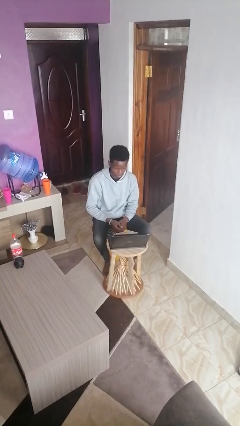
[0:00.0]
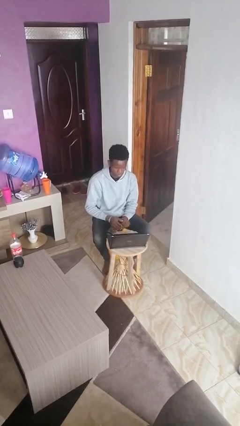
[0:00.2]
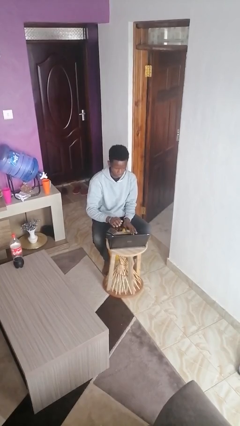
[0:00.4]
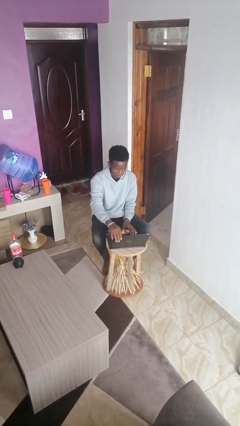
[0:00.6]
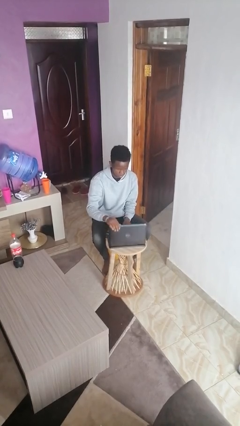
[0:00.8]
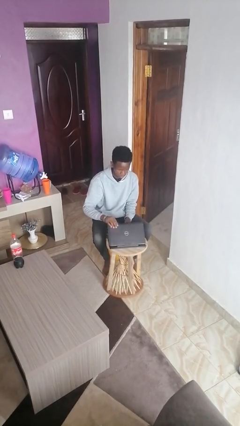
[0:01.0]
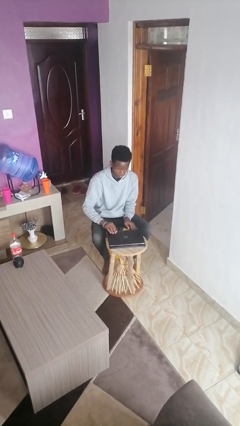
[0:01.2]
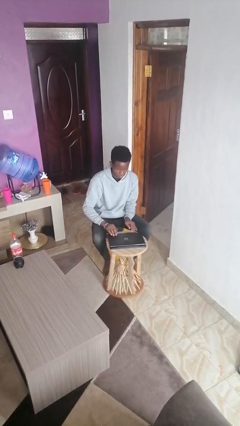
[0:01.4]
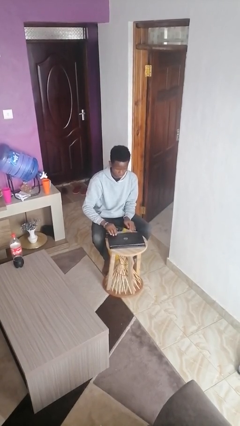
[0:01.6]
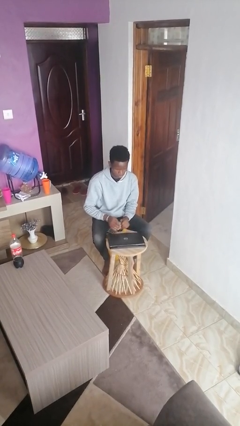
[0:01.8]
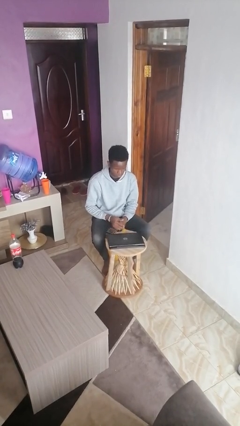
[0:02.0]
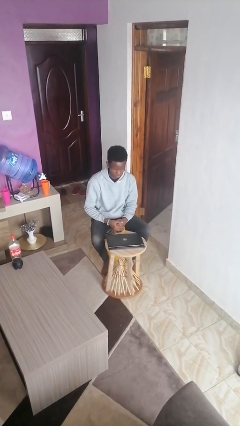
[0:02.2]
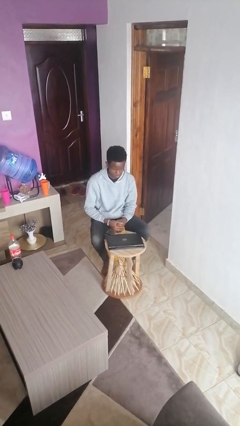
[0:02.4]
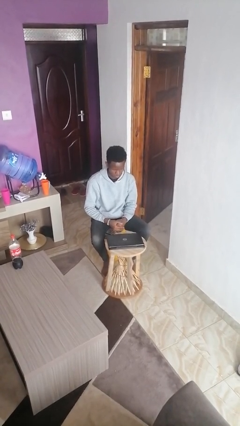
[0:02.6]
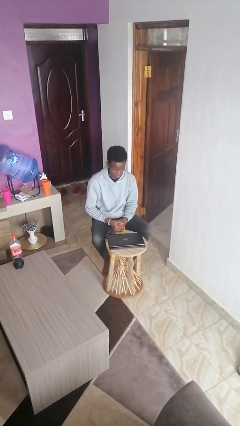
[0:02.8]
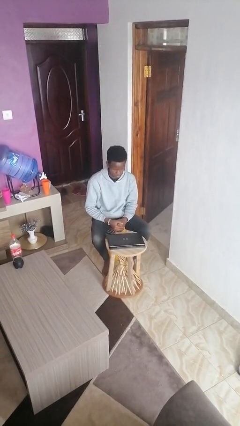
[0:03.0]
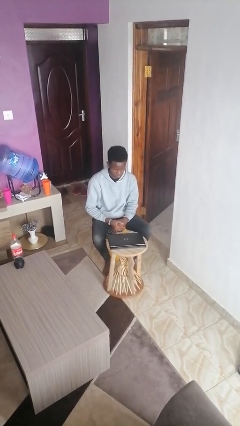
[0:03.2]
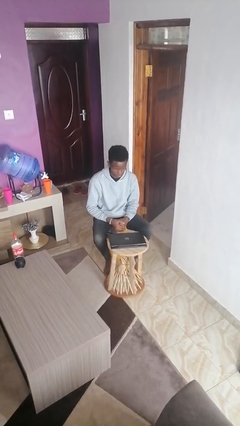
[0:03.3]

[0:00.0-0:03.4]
person closes laptop

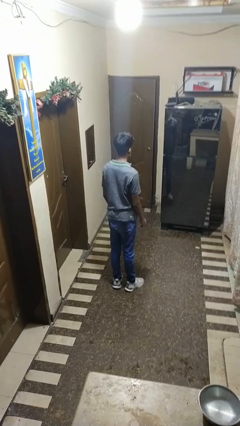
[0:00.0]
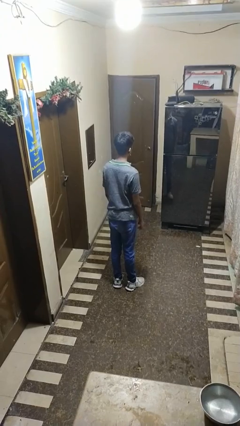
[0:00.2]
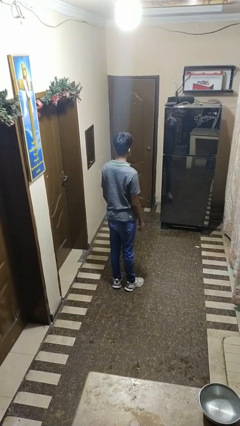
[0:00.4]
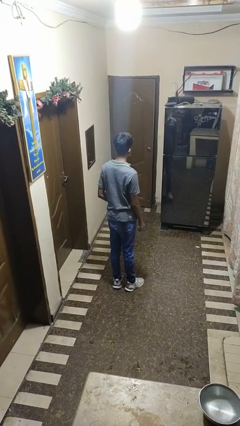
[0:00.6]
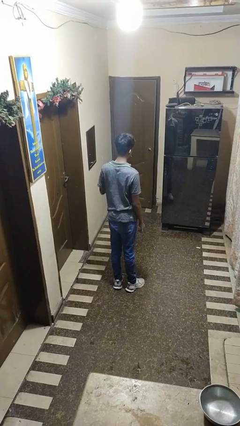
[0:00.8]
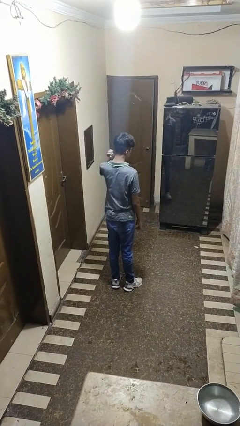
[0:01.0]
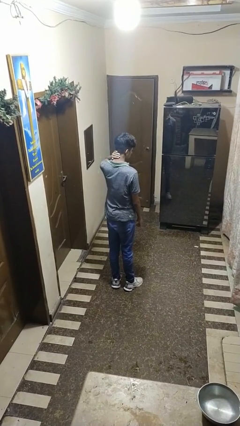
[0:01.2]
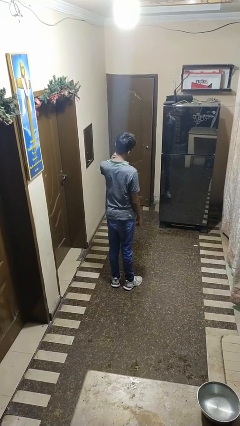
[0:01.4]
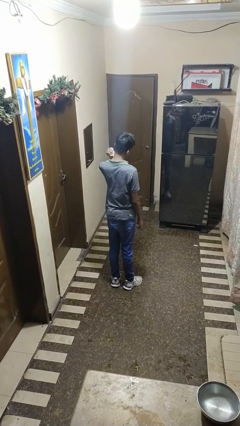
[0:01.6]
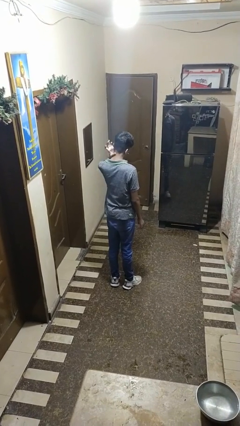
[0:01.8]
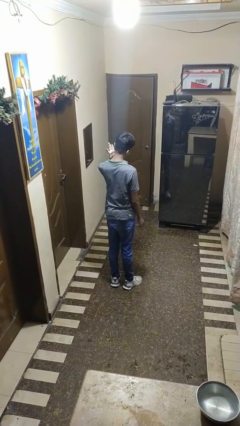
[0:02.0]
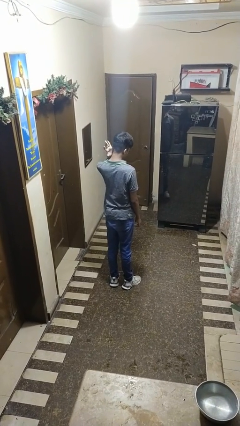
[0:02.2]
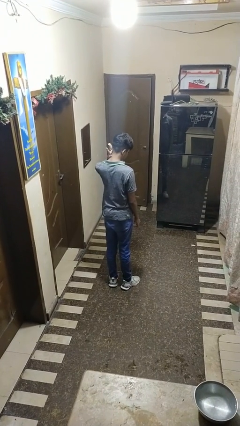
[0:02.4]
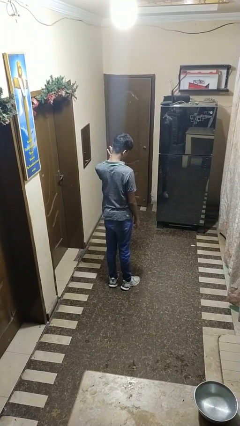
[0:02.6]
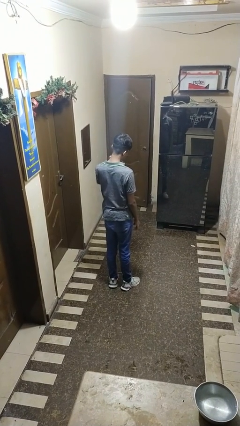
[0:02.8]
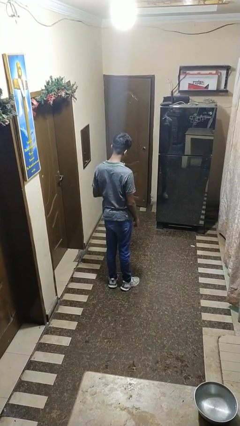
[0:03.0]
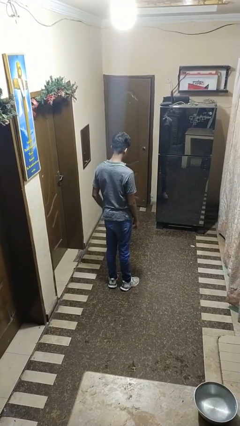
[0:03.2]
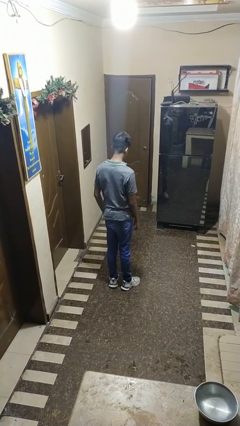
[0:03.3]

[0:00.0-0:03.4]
person rubs neck

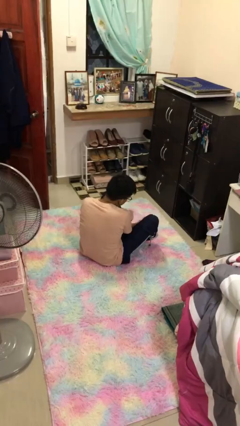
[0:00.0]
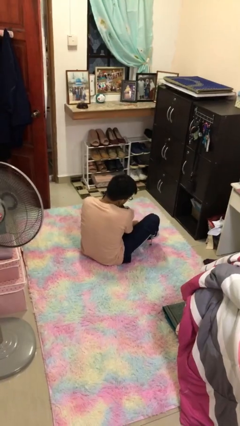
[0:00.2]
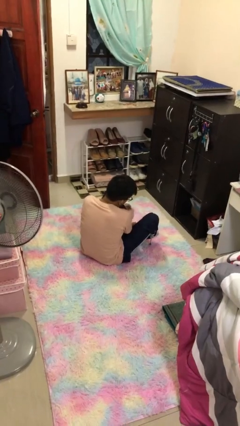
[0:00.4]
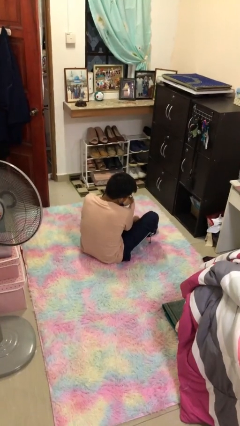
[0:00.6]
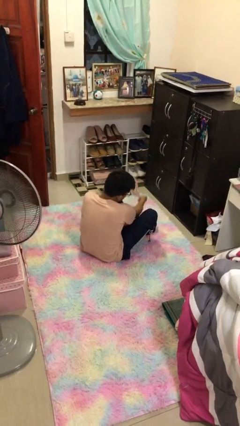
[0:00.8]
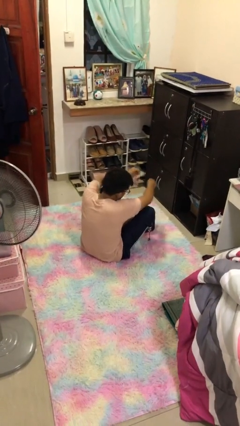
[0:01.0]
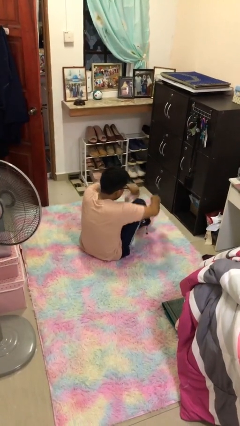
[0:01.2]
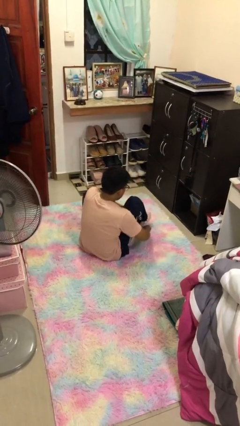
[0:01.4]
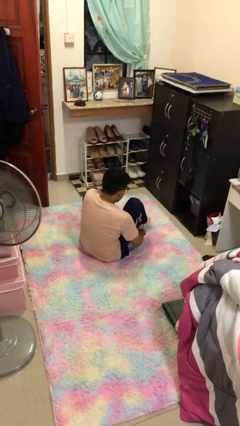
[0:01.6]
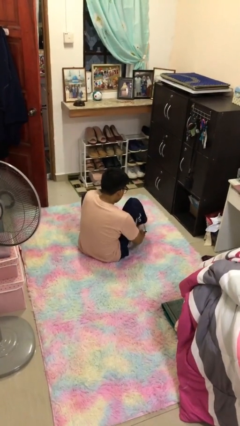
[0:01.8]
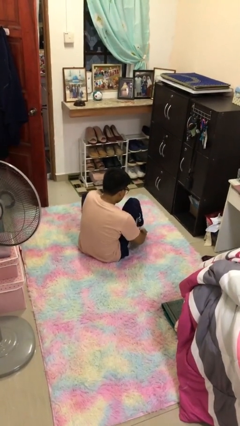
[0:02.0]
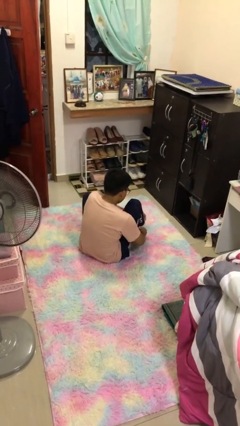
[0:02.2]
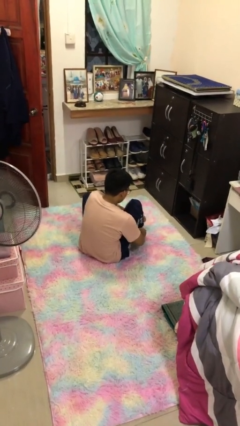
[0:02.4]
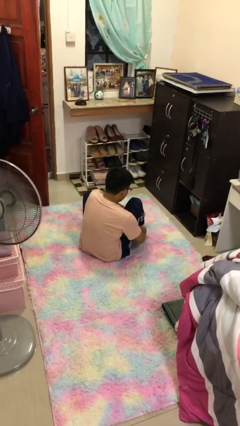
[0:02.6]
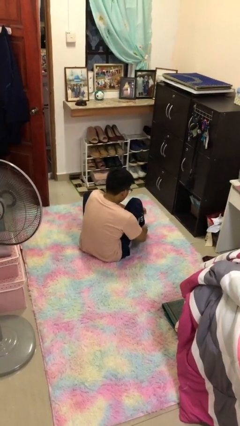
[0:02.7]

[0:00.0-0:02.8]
person takes off socks

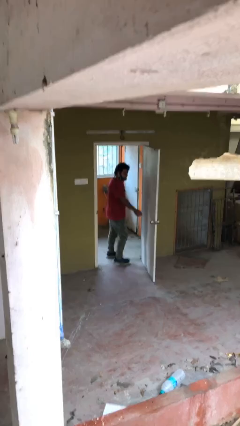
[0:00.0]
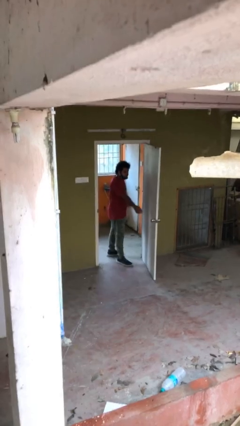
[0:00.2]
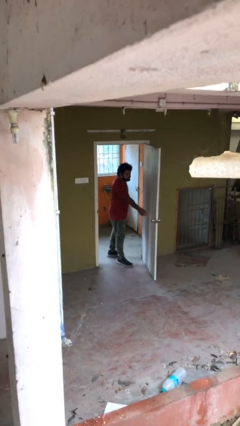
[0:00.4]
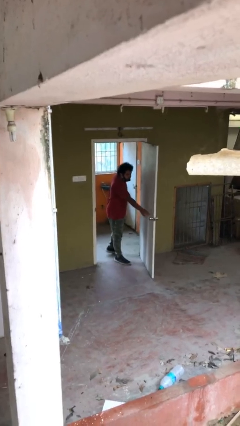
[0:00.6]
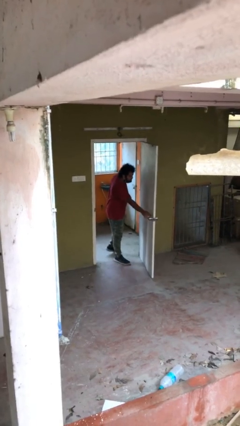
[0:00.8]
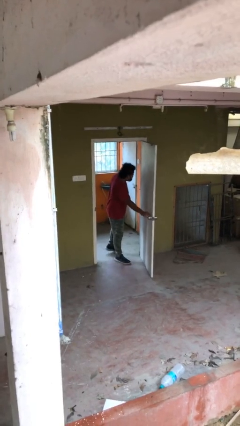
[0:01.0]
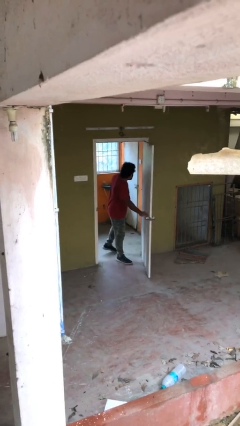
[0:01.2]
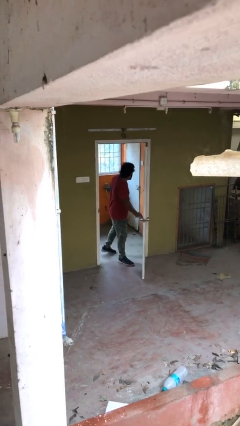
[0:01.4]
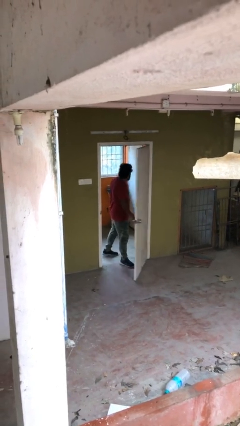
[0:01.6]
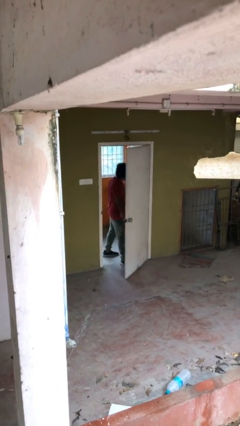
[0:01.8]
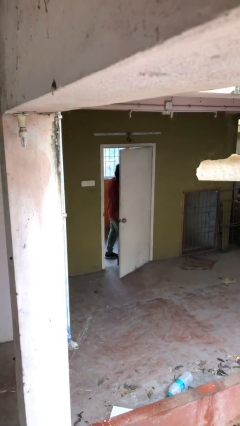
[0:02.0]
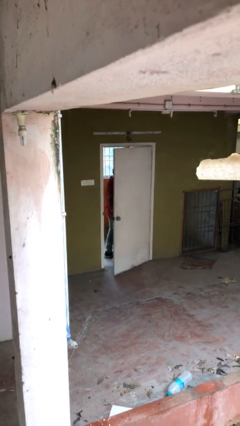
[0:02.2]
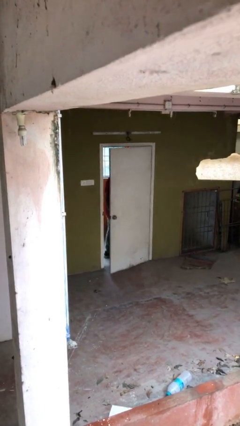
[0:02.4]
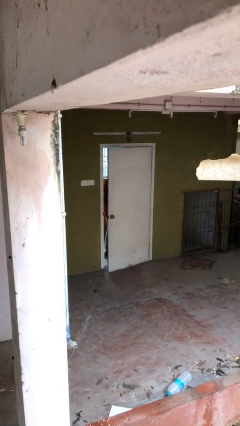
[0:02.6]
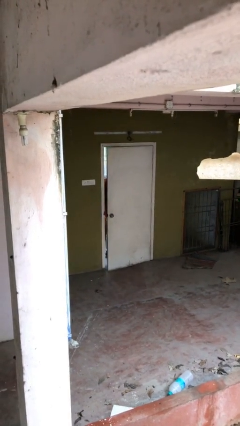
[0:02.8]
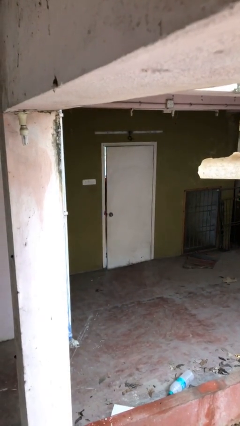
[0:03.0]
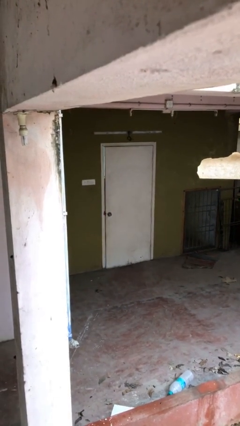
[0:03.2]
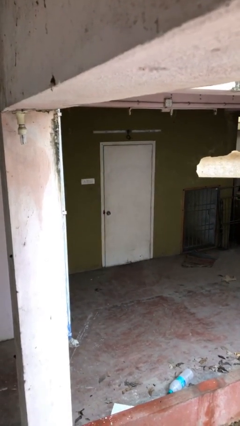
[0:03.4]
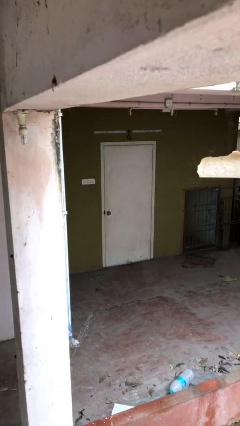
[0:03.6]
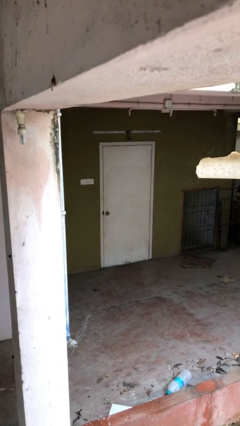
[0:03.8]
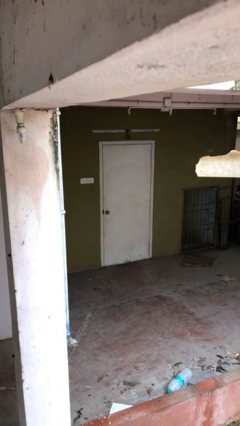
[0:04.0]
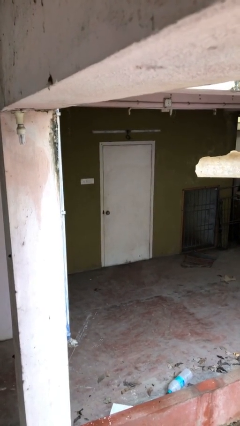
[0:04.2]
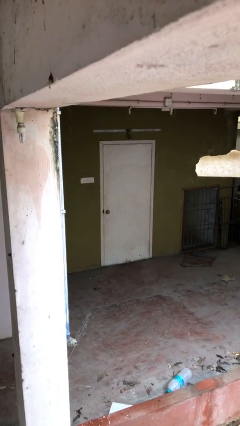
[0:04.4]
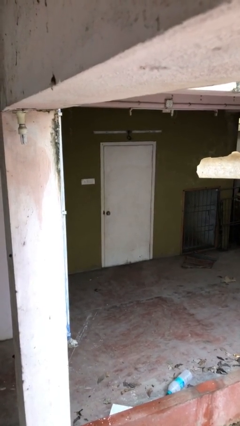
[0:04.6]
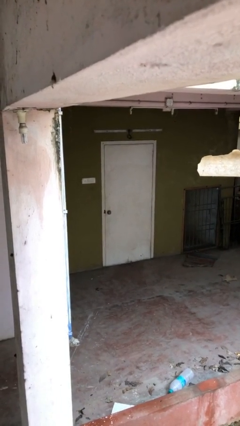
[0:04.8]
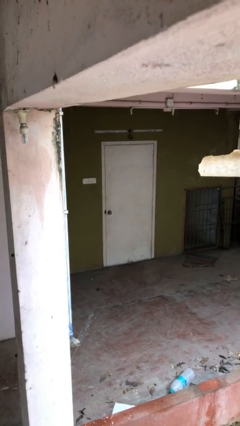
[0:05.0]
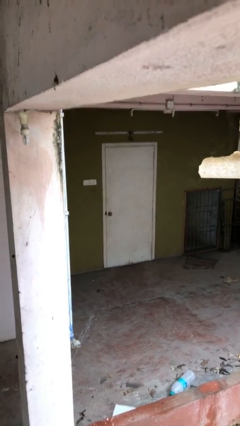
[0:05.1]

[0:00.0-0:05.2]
person closes facility door

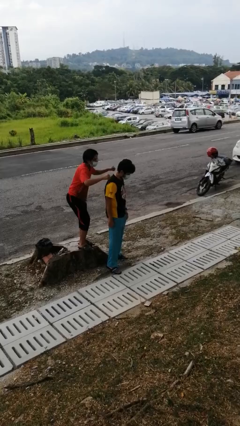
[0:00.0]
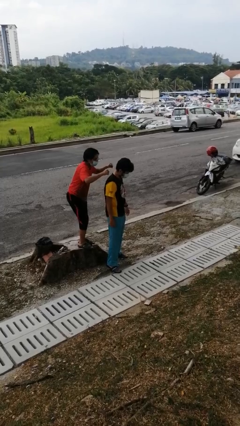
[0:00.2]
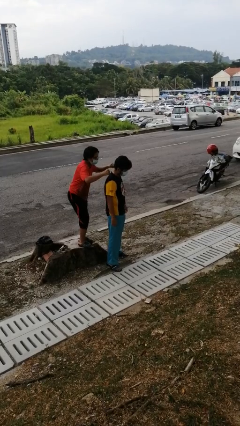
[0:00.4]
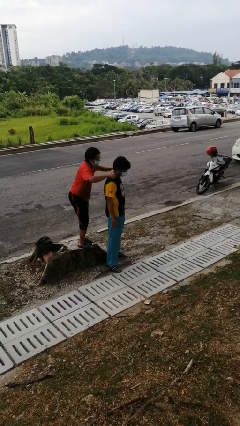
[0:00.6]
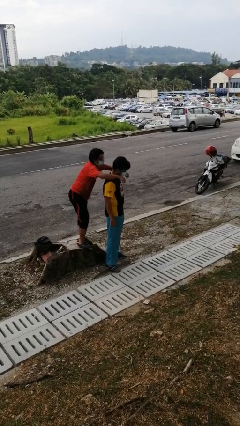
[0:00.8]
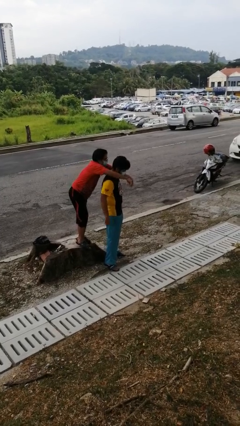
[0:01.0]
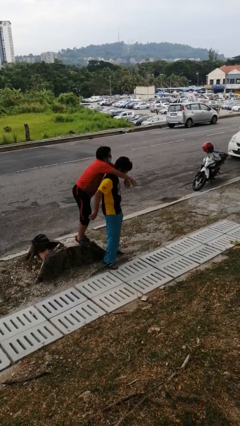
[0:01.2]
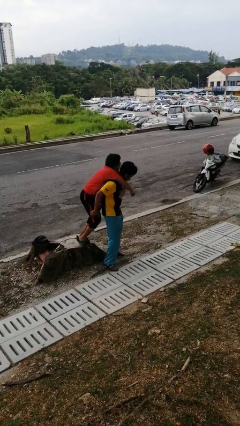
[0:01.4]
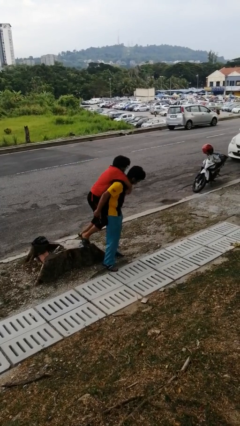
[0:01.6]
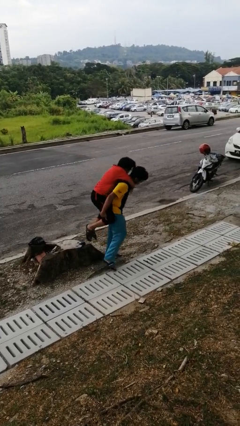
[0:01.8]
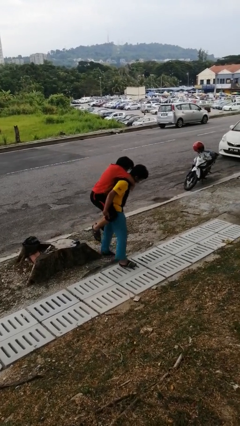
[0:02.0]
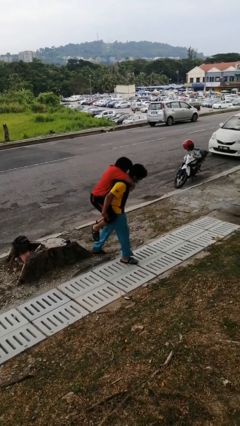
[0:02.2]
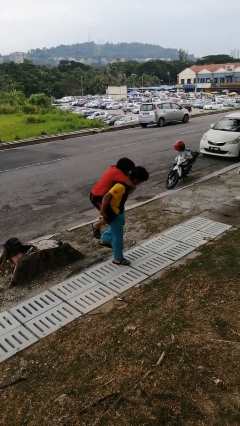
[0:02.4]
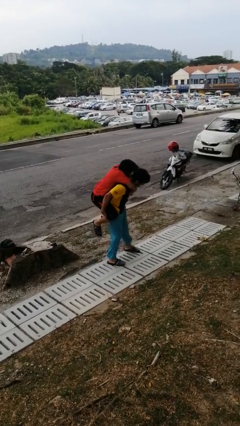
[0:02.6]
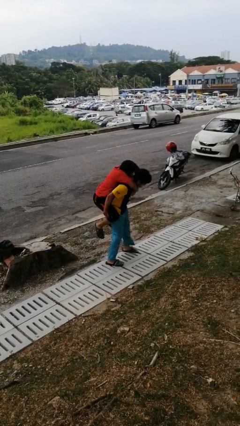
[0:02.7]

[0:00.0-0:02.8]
person carries person over shoulder
